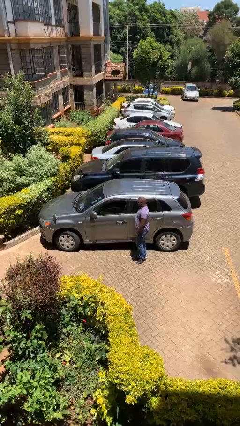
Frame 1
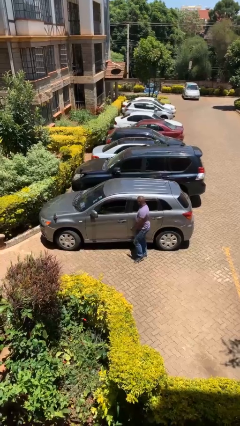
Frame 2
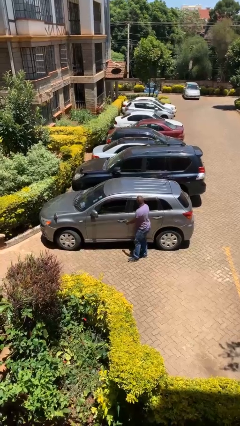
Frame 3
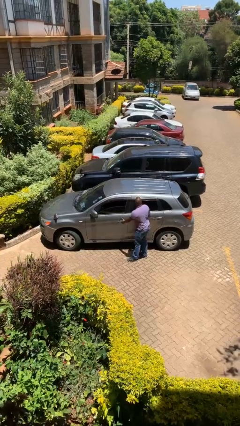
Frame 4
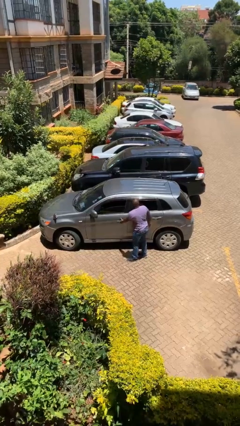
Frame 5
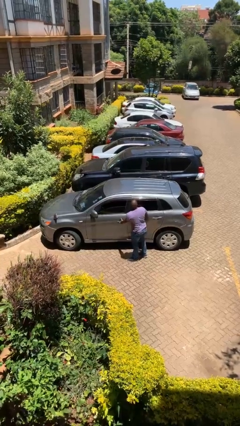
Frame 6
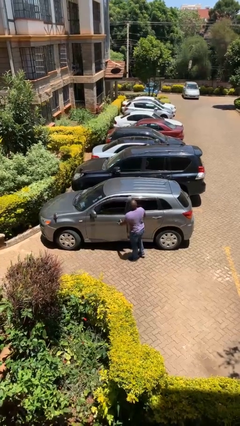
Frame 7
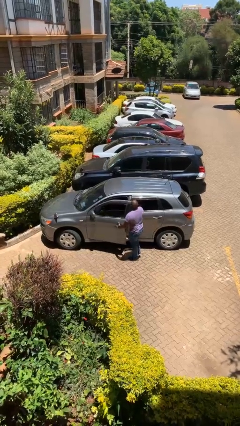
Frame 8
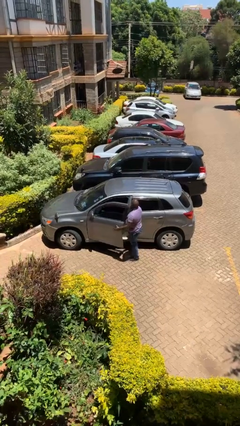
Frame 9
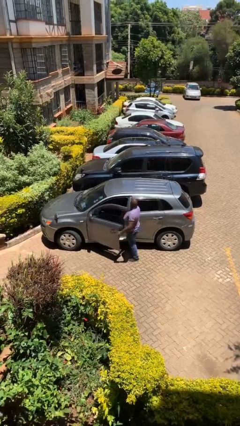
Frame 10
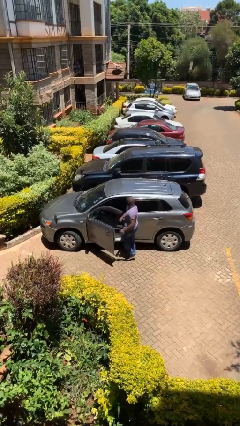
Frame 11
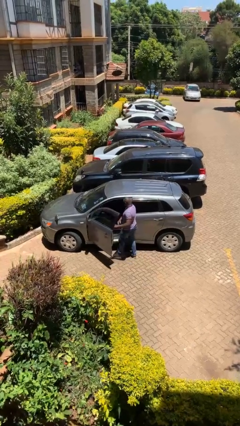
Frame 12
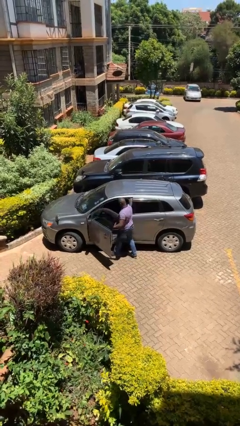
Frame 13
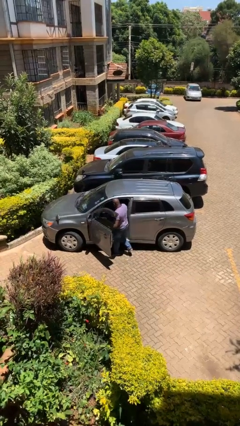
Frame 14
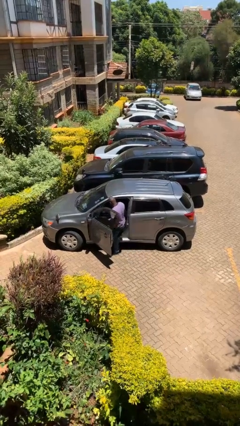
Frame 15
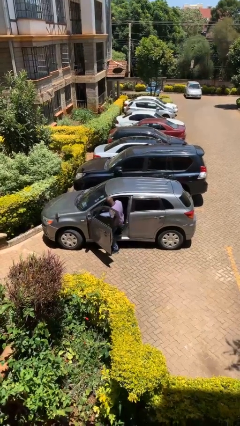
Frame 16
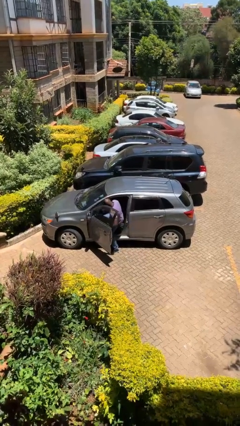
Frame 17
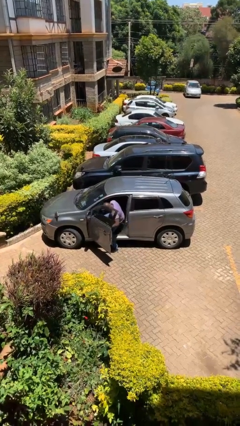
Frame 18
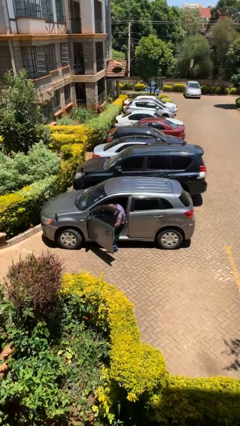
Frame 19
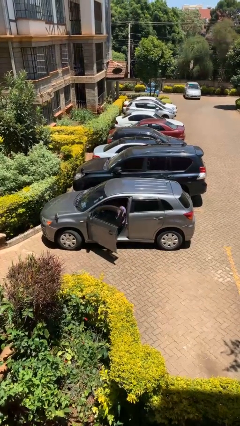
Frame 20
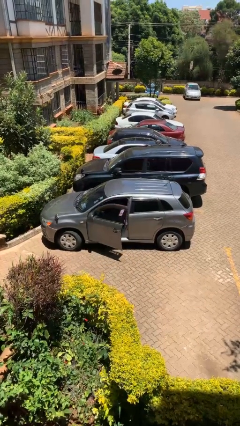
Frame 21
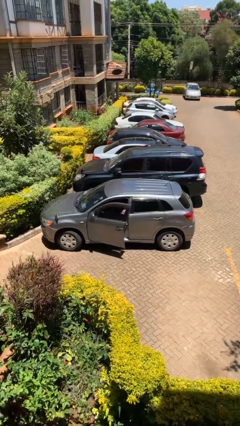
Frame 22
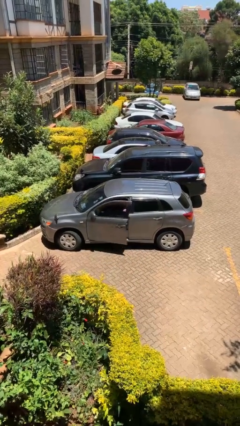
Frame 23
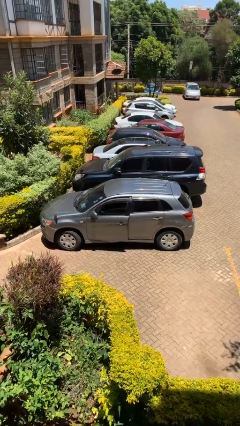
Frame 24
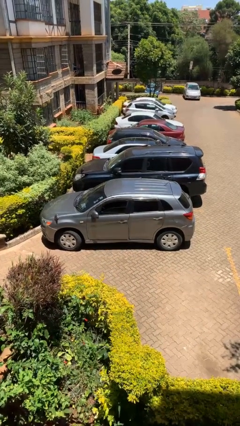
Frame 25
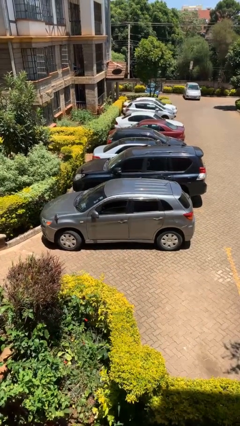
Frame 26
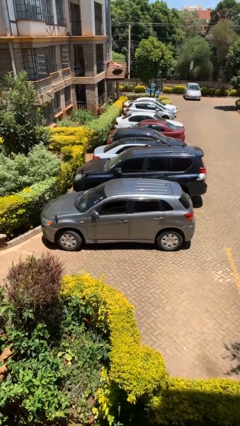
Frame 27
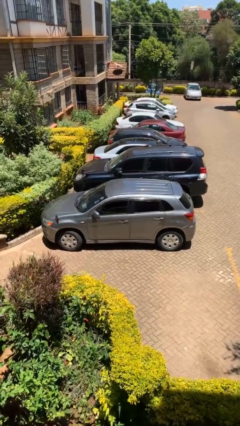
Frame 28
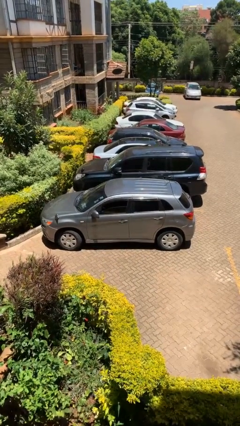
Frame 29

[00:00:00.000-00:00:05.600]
car picks up person

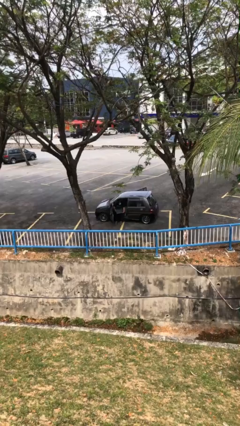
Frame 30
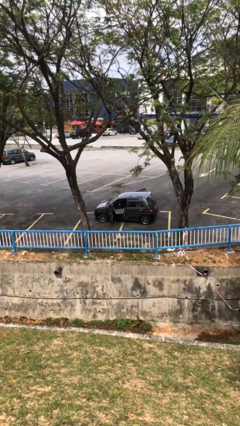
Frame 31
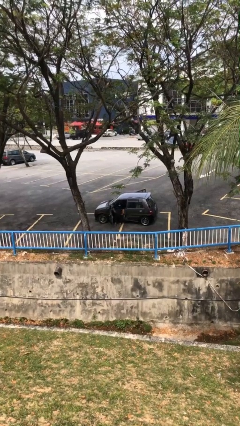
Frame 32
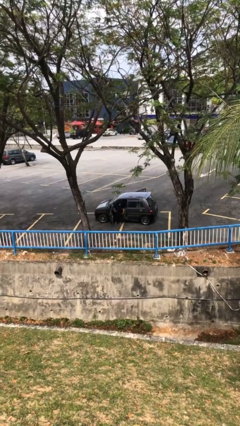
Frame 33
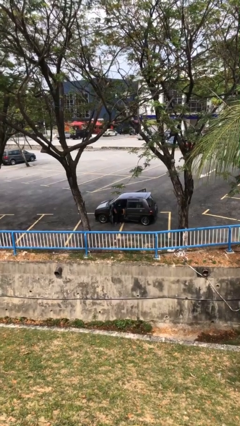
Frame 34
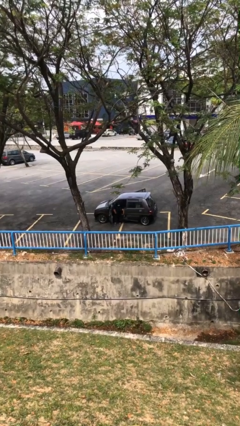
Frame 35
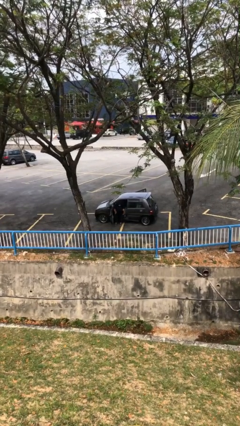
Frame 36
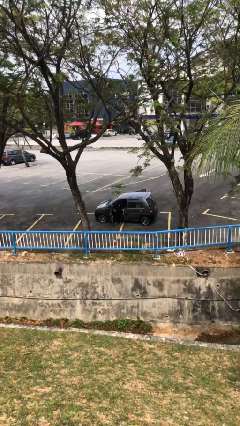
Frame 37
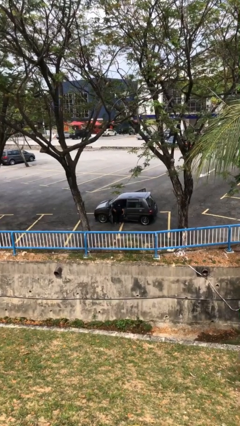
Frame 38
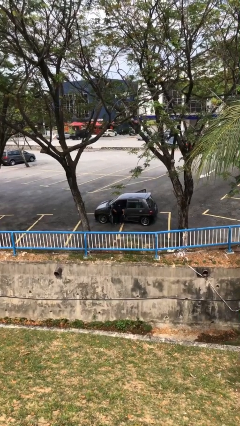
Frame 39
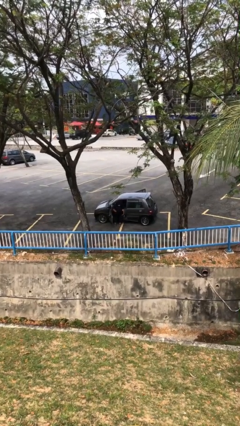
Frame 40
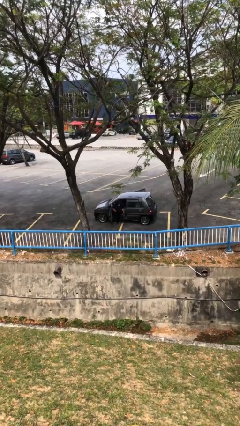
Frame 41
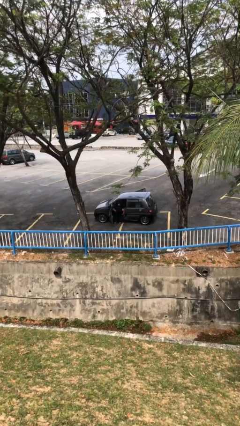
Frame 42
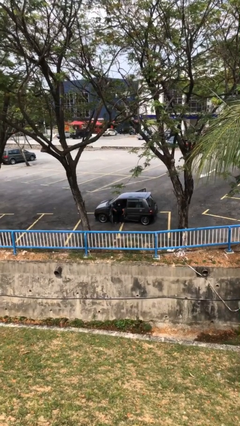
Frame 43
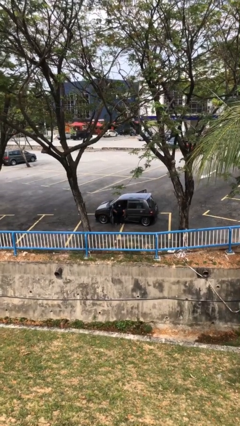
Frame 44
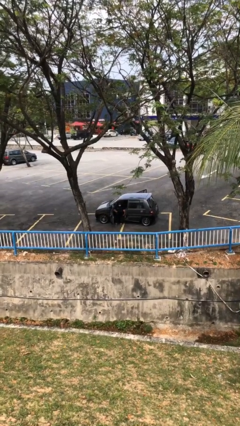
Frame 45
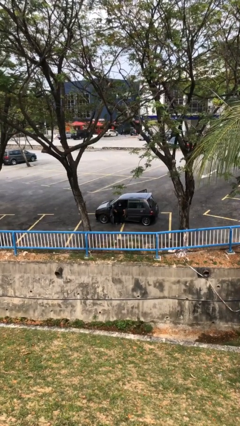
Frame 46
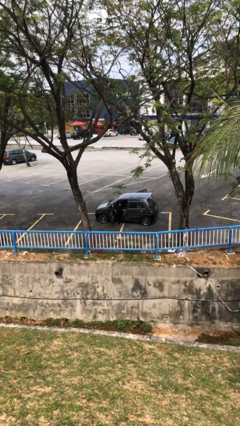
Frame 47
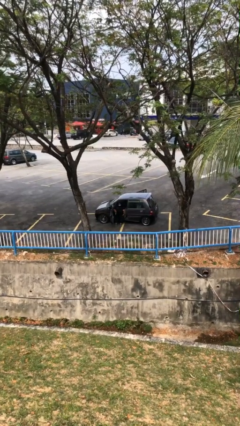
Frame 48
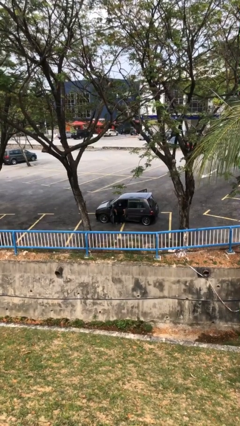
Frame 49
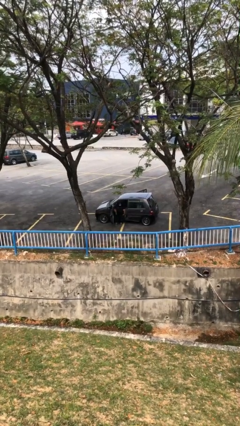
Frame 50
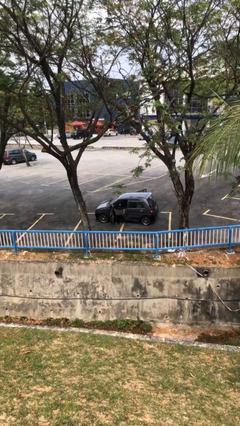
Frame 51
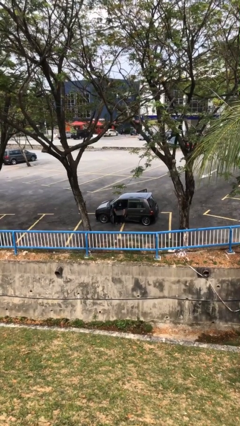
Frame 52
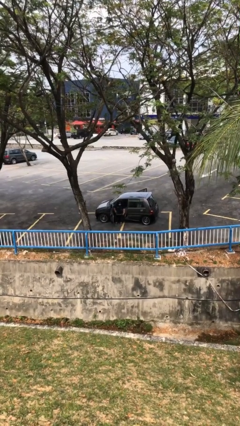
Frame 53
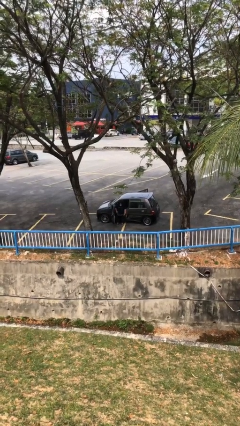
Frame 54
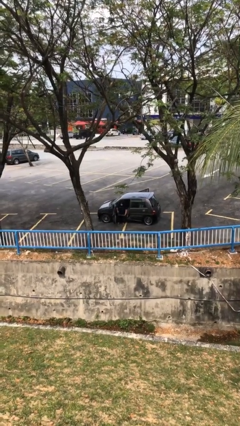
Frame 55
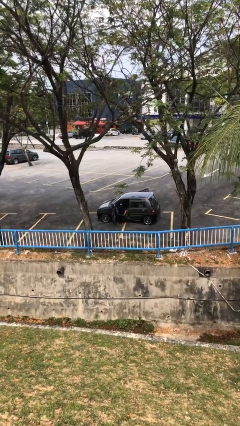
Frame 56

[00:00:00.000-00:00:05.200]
person interacts with laptop

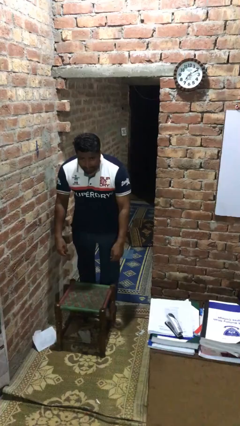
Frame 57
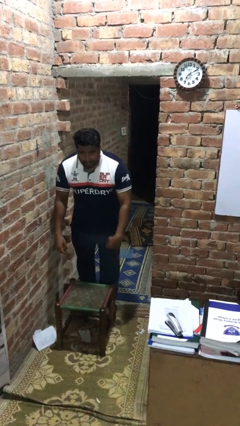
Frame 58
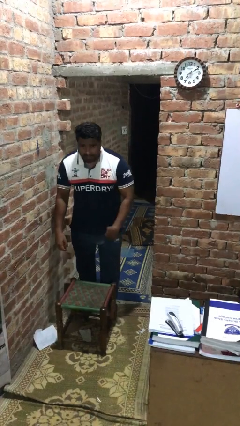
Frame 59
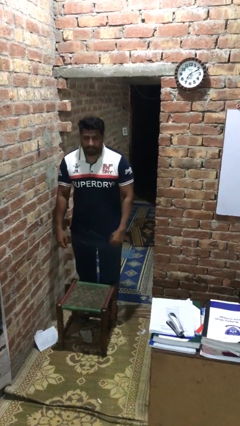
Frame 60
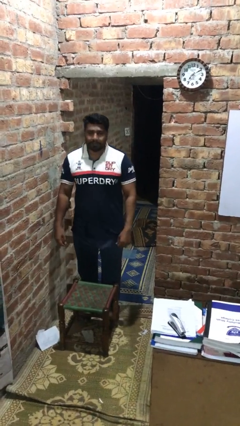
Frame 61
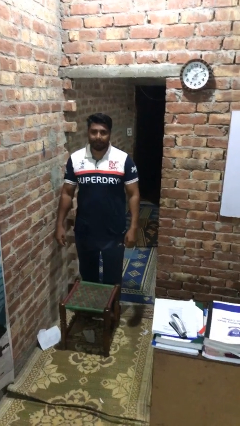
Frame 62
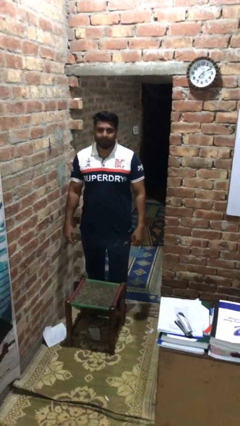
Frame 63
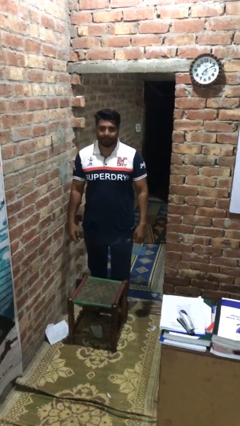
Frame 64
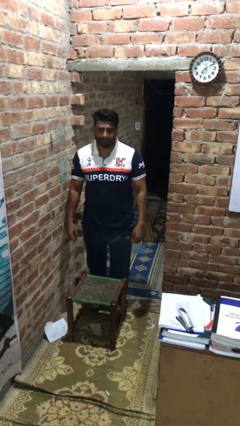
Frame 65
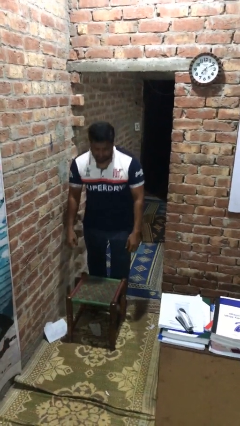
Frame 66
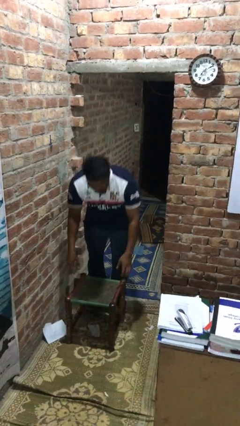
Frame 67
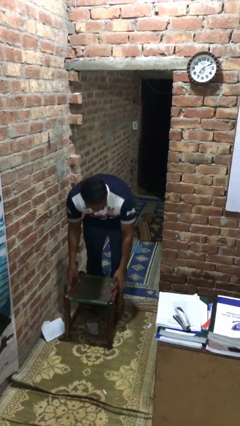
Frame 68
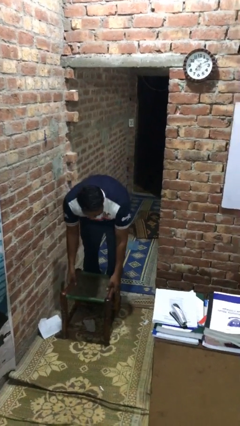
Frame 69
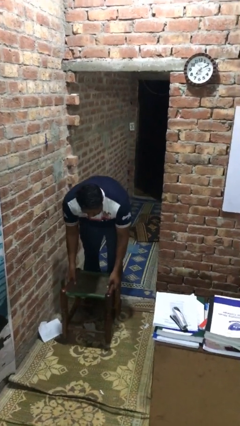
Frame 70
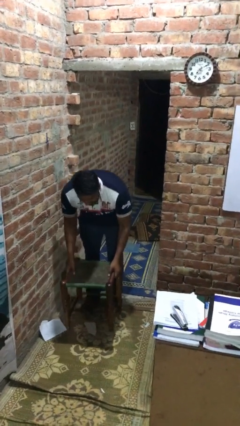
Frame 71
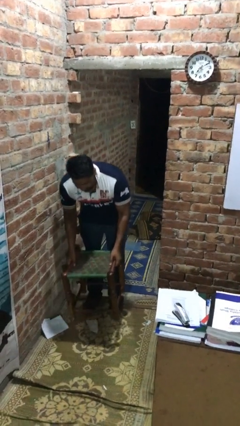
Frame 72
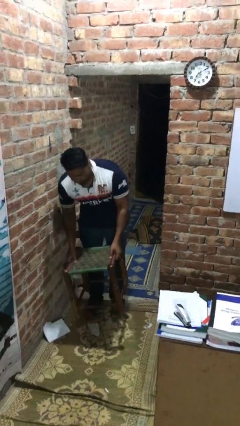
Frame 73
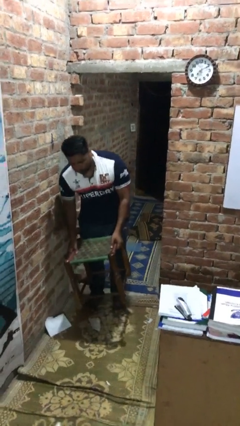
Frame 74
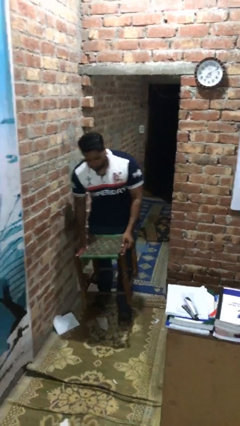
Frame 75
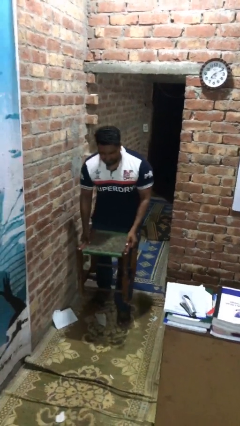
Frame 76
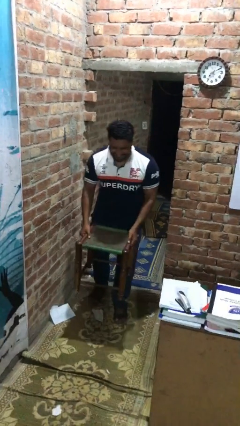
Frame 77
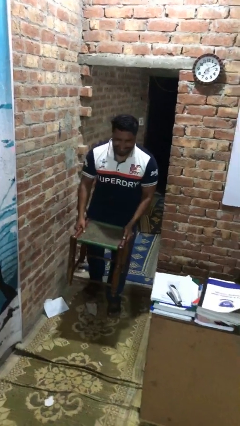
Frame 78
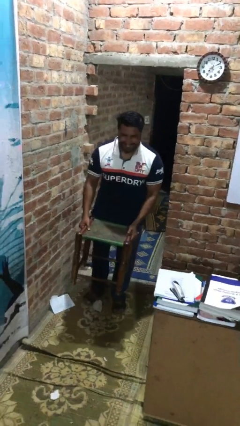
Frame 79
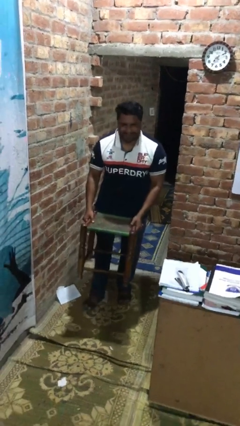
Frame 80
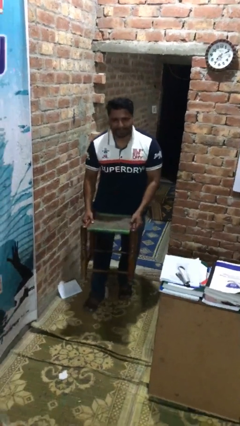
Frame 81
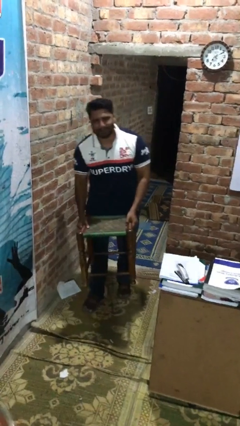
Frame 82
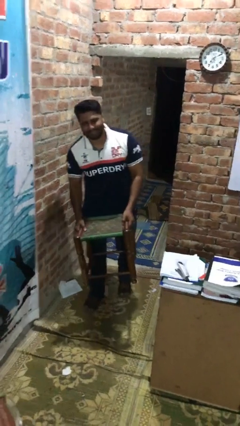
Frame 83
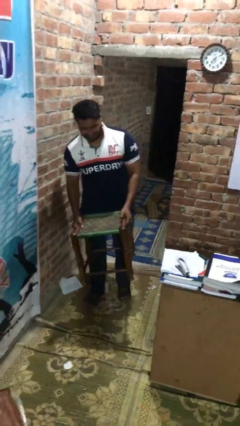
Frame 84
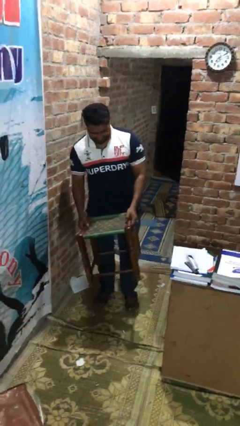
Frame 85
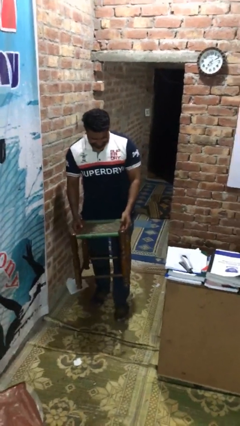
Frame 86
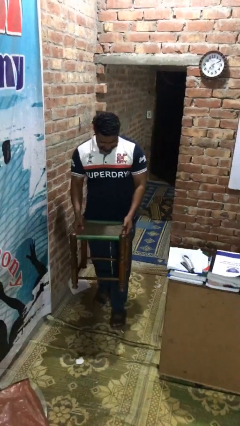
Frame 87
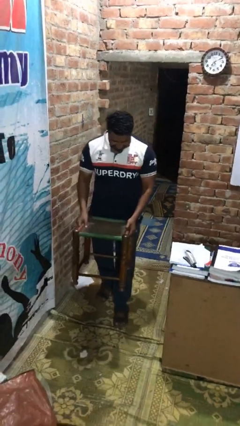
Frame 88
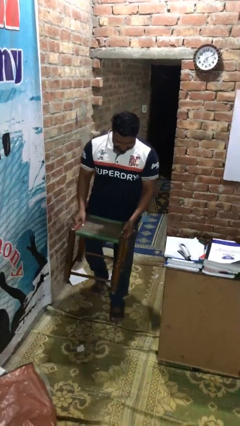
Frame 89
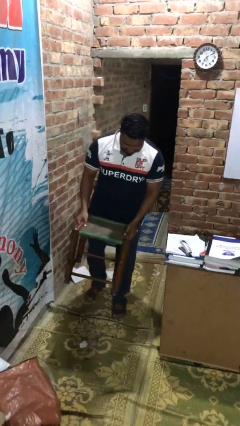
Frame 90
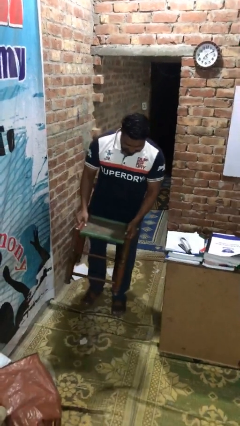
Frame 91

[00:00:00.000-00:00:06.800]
person carries heavy object

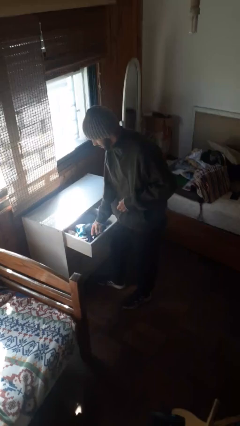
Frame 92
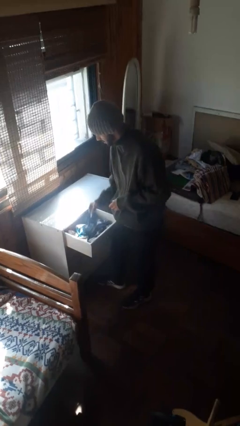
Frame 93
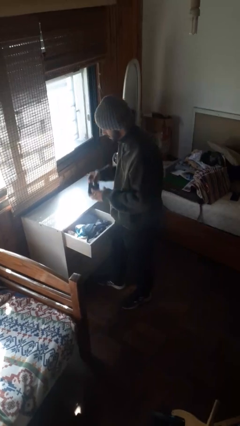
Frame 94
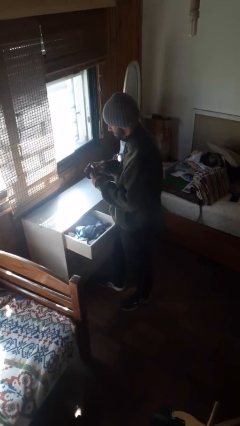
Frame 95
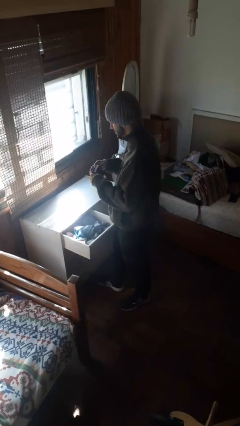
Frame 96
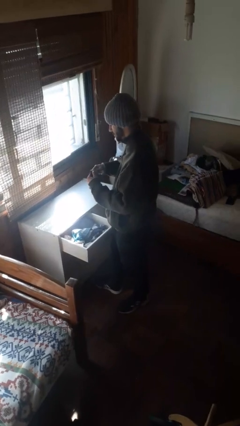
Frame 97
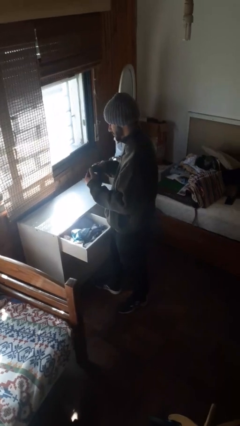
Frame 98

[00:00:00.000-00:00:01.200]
person takes clothes from dresser
